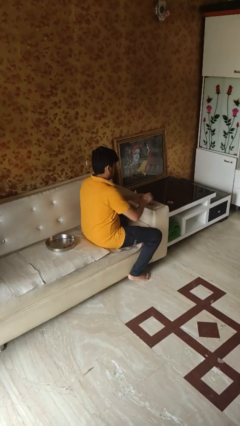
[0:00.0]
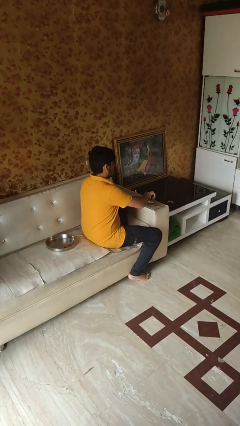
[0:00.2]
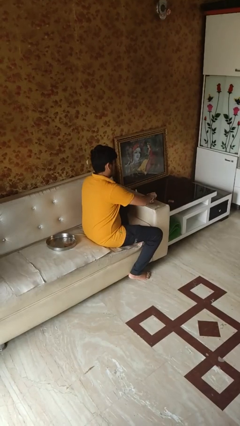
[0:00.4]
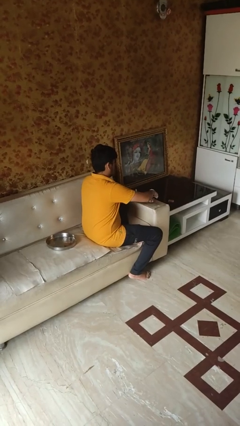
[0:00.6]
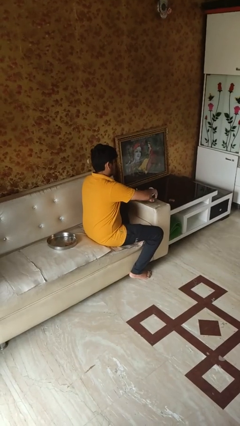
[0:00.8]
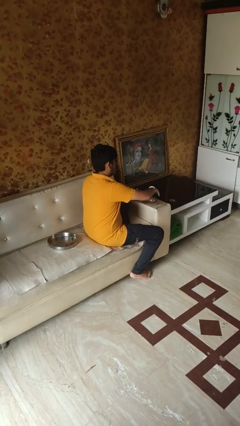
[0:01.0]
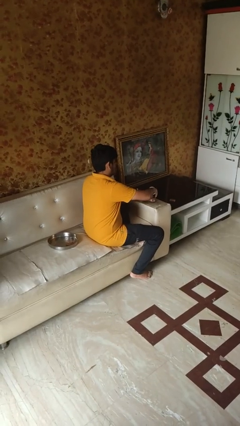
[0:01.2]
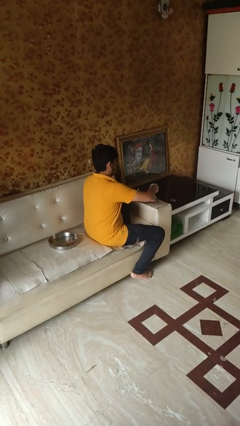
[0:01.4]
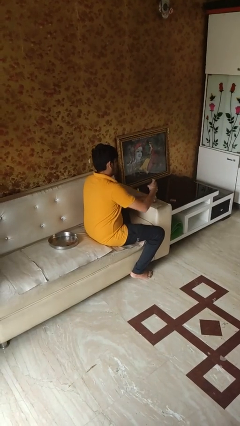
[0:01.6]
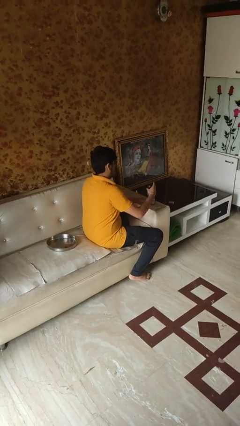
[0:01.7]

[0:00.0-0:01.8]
person opens jar

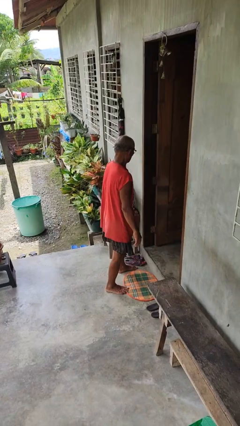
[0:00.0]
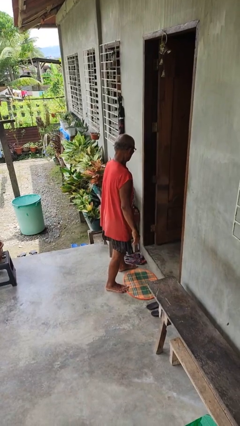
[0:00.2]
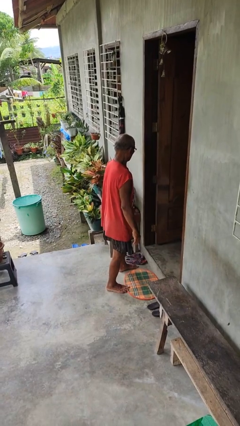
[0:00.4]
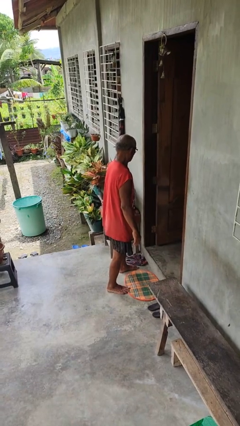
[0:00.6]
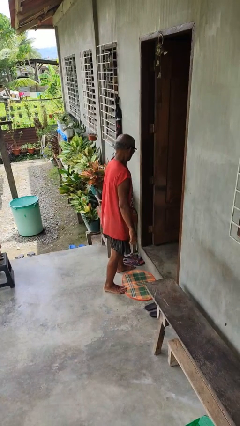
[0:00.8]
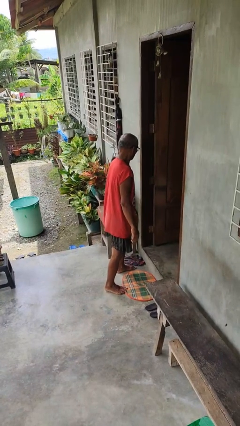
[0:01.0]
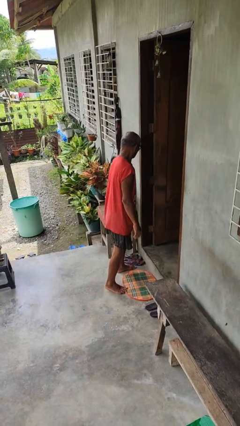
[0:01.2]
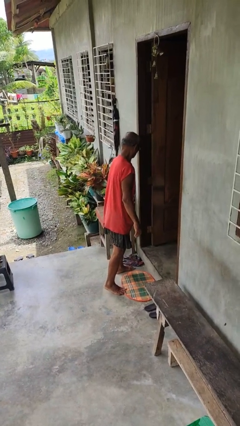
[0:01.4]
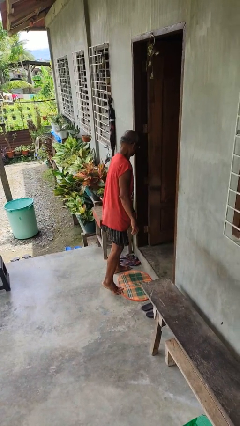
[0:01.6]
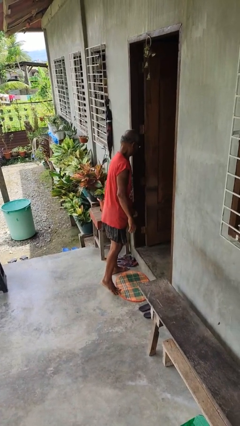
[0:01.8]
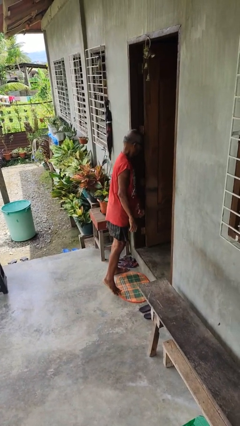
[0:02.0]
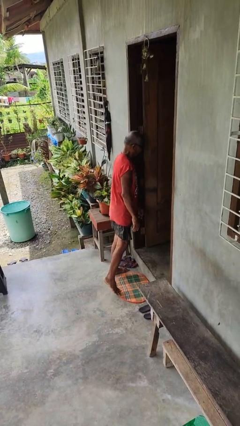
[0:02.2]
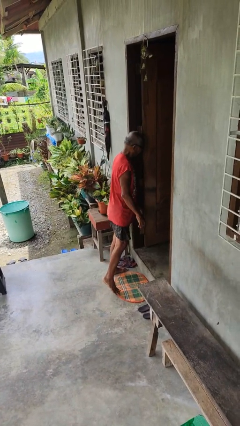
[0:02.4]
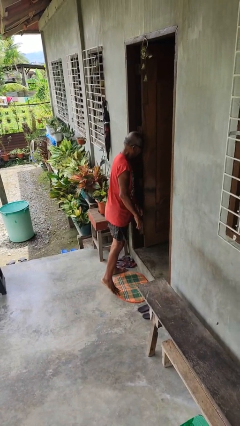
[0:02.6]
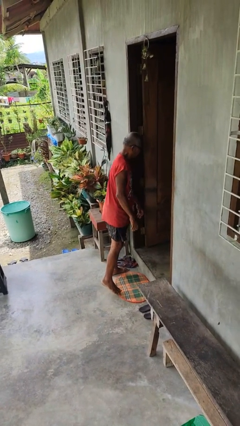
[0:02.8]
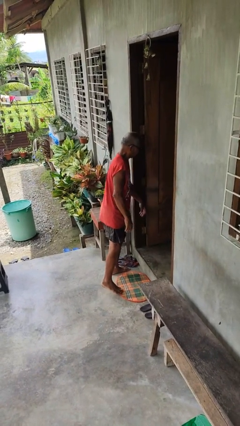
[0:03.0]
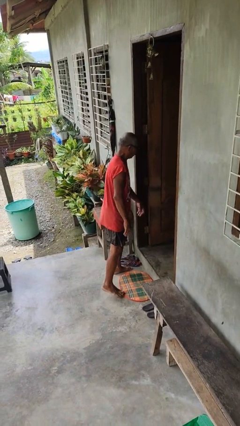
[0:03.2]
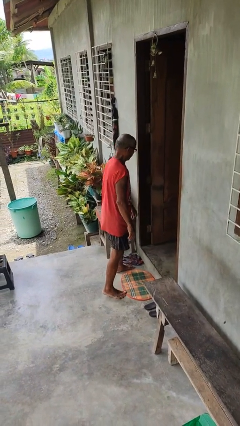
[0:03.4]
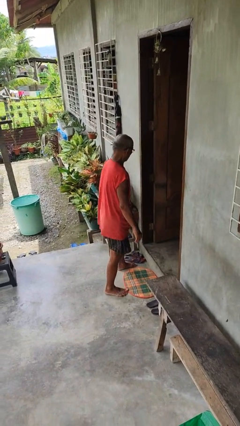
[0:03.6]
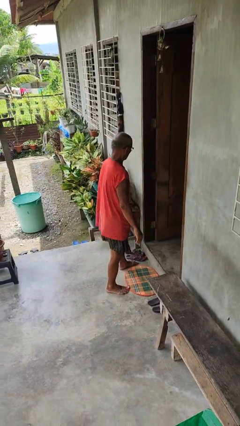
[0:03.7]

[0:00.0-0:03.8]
person bumps into wall

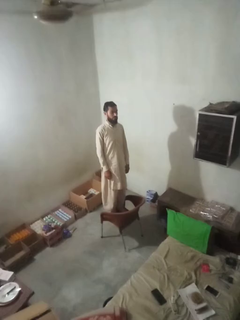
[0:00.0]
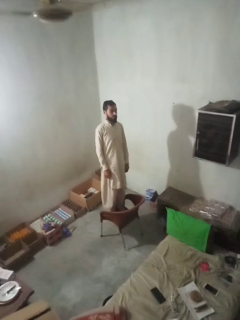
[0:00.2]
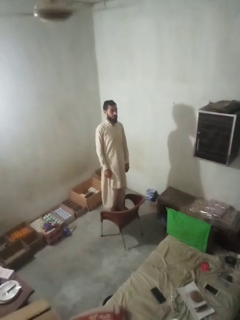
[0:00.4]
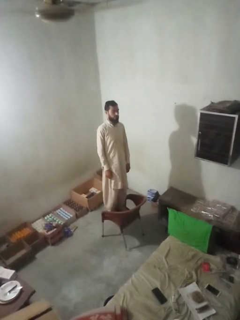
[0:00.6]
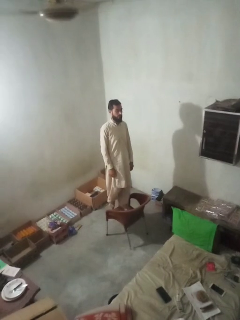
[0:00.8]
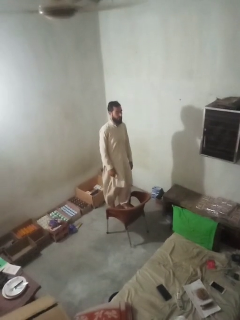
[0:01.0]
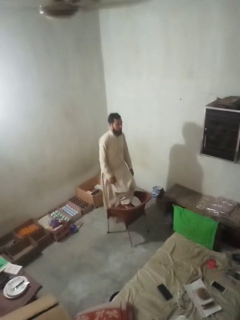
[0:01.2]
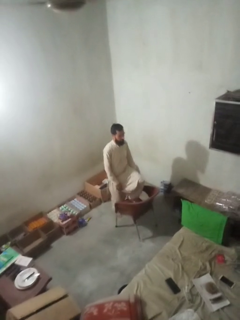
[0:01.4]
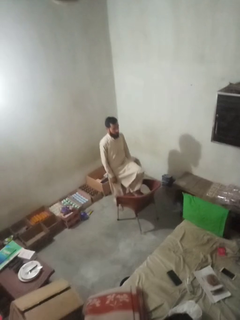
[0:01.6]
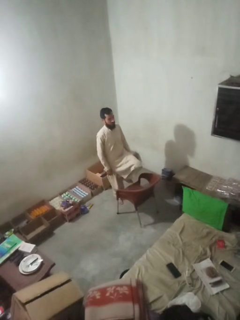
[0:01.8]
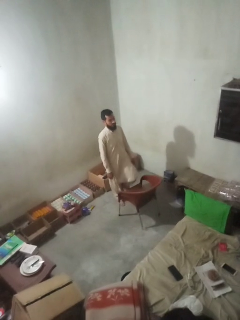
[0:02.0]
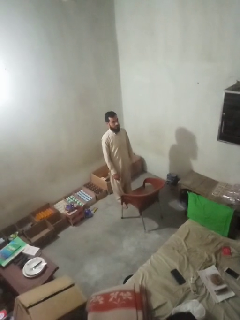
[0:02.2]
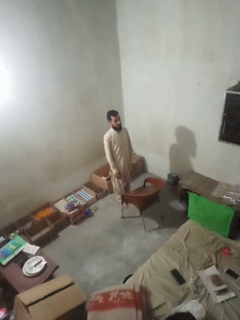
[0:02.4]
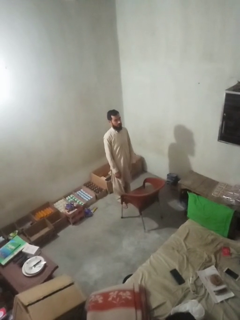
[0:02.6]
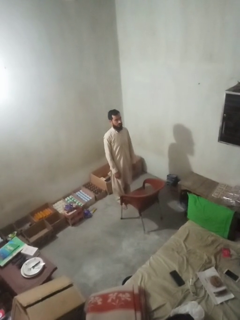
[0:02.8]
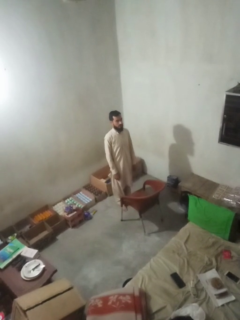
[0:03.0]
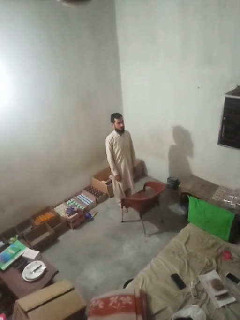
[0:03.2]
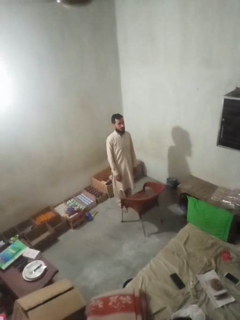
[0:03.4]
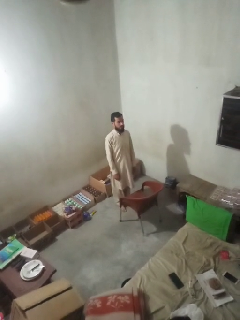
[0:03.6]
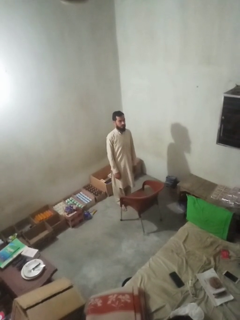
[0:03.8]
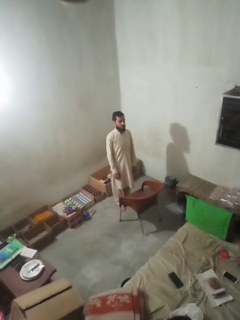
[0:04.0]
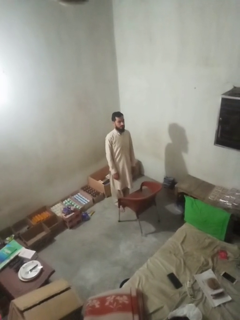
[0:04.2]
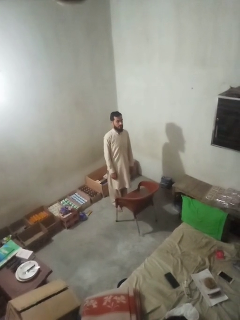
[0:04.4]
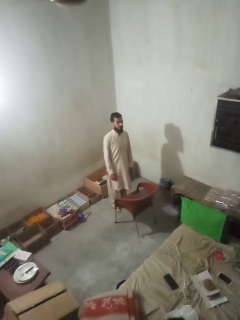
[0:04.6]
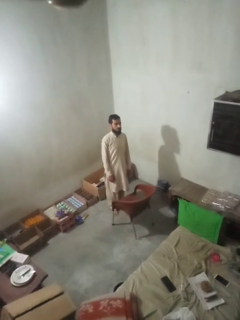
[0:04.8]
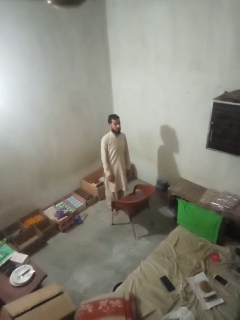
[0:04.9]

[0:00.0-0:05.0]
person climbs off chair

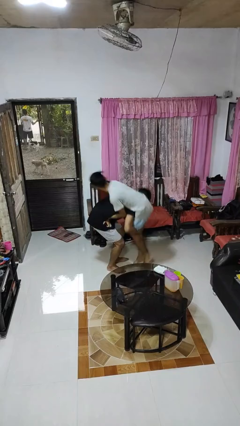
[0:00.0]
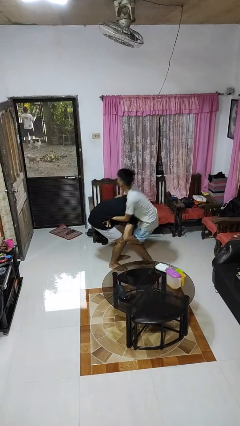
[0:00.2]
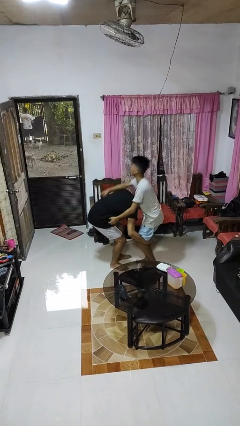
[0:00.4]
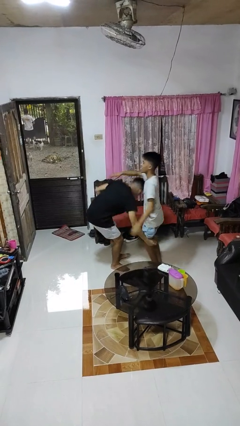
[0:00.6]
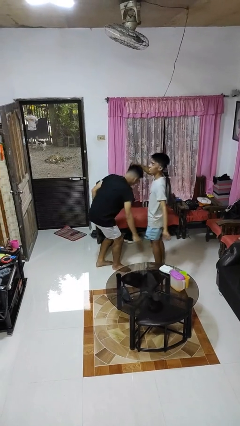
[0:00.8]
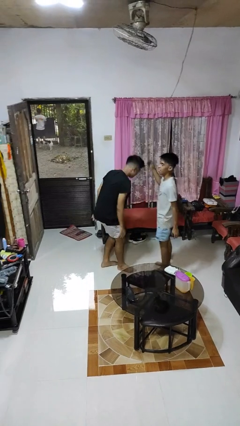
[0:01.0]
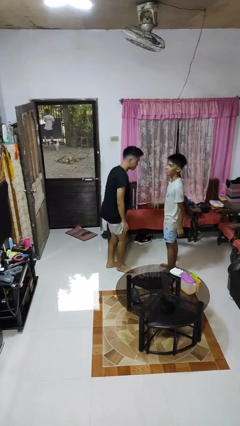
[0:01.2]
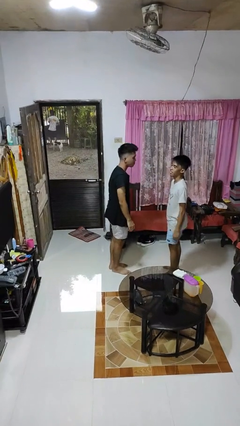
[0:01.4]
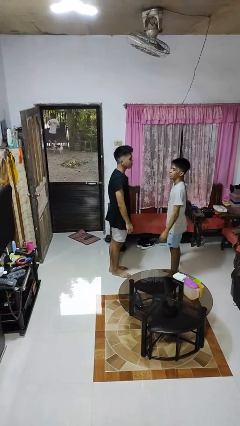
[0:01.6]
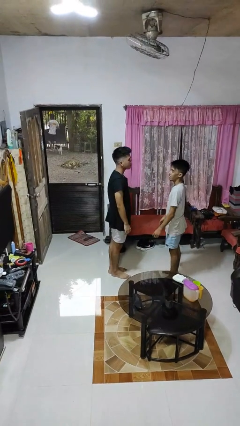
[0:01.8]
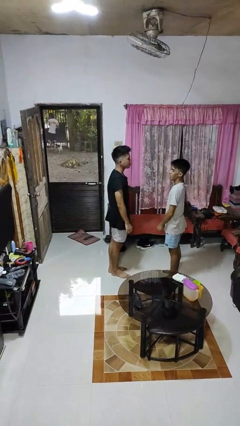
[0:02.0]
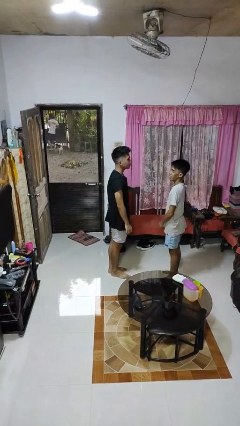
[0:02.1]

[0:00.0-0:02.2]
person puts down person

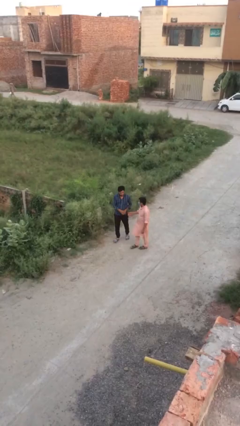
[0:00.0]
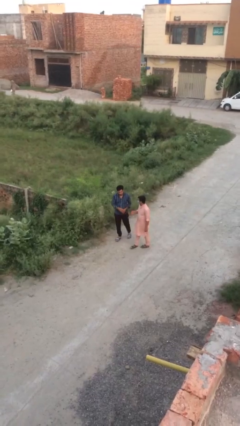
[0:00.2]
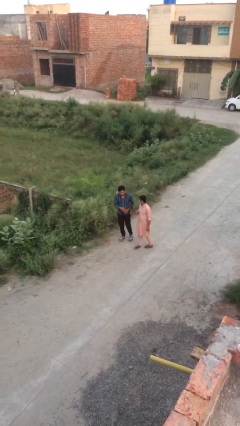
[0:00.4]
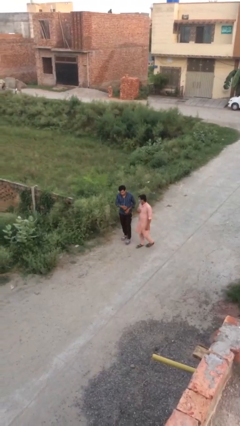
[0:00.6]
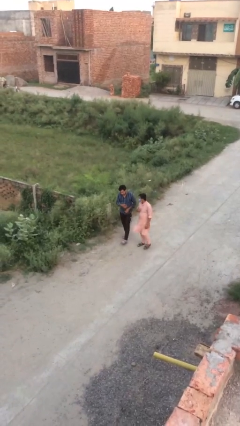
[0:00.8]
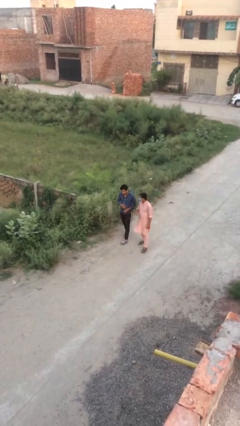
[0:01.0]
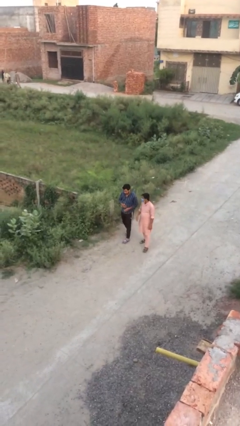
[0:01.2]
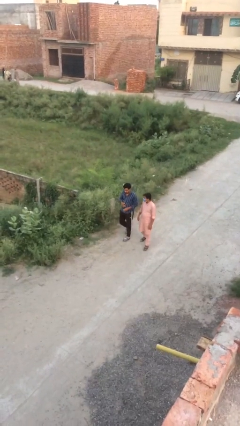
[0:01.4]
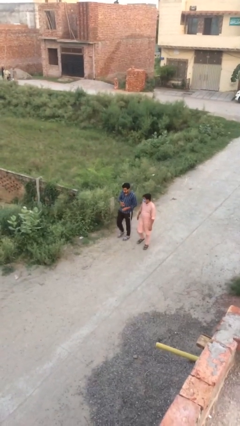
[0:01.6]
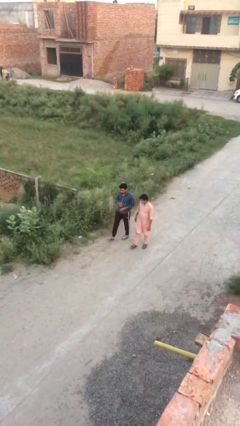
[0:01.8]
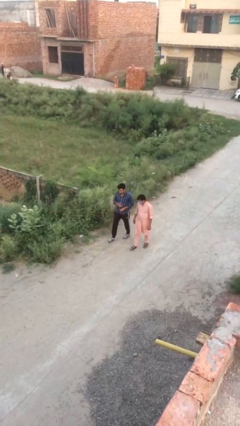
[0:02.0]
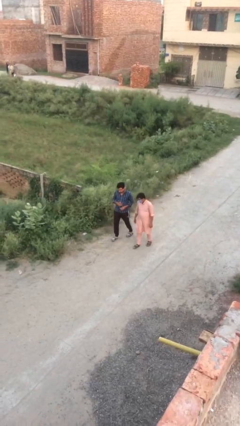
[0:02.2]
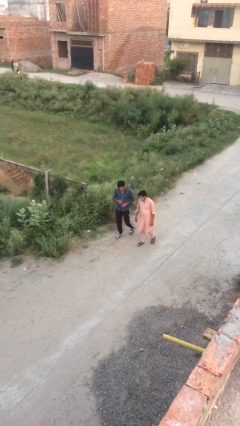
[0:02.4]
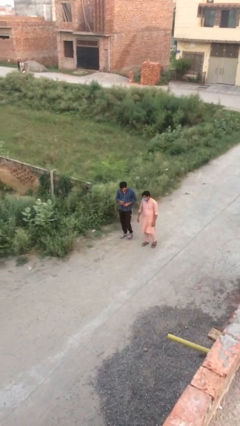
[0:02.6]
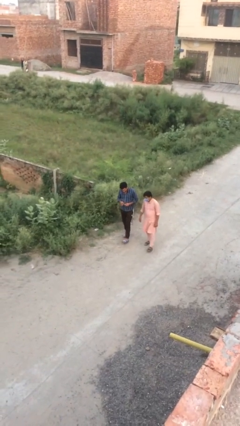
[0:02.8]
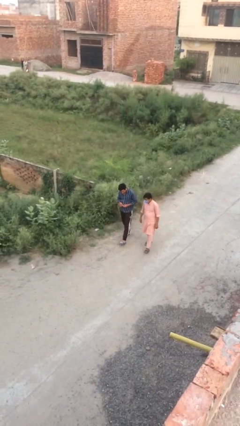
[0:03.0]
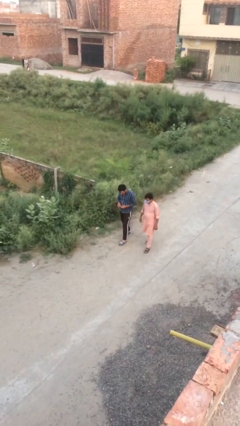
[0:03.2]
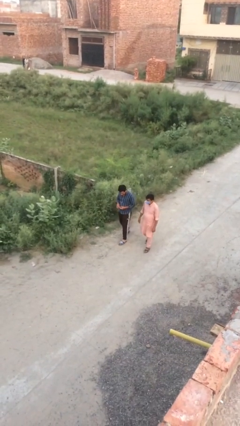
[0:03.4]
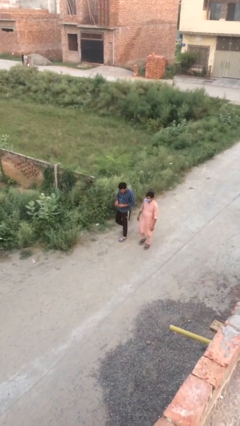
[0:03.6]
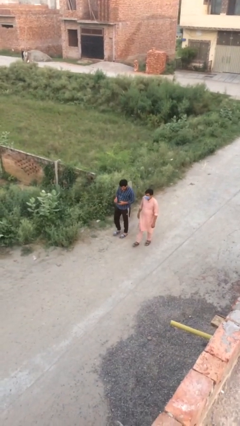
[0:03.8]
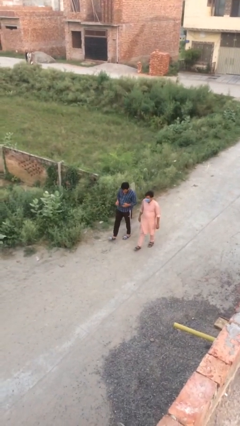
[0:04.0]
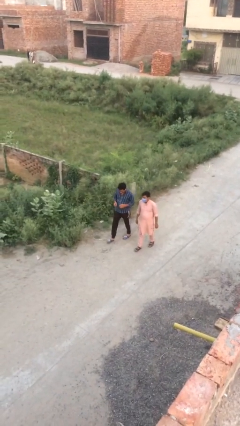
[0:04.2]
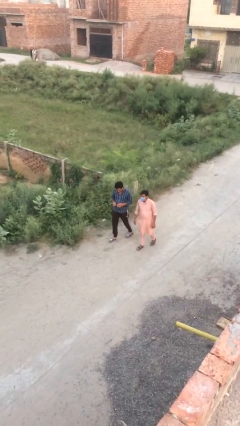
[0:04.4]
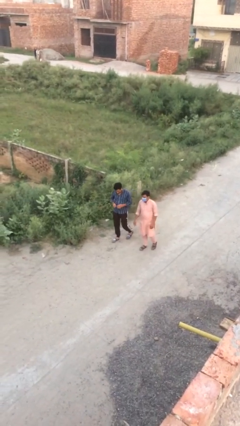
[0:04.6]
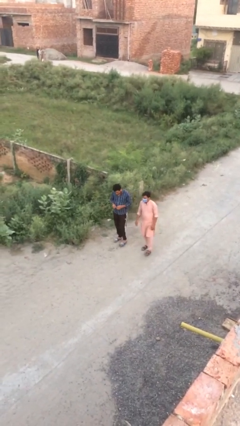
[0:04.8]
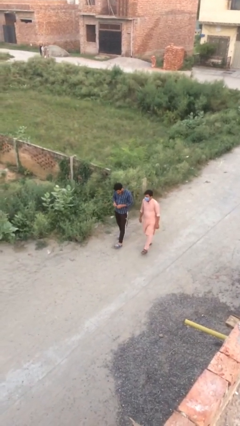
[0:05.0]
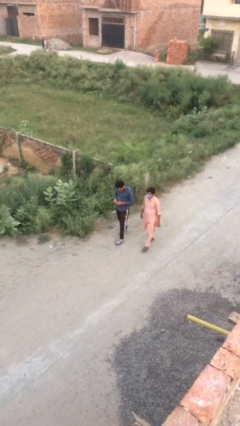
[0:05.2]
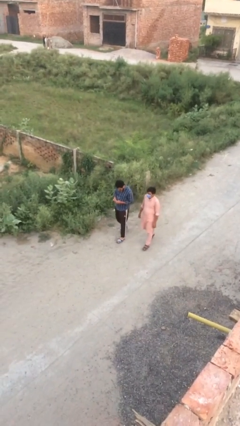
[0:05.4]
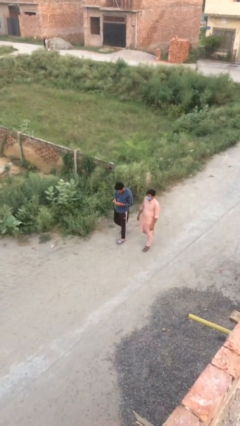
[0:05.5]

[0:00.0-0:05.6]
person talks to person
